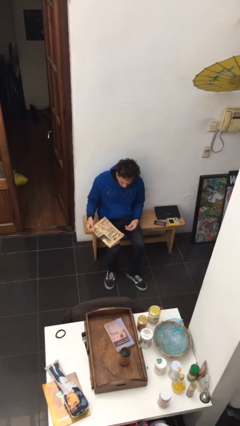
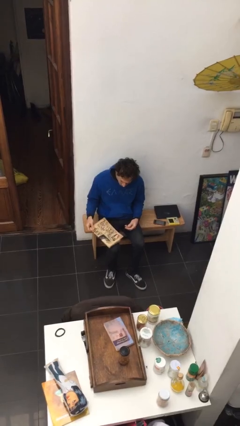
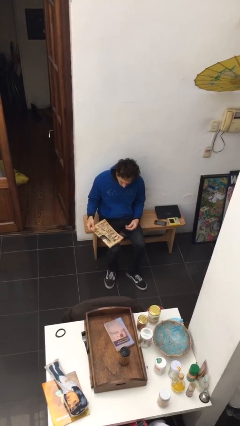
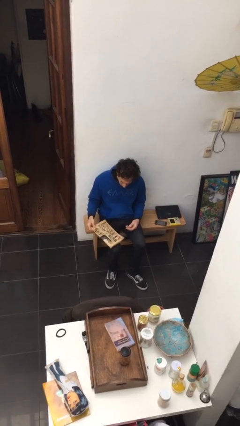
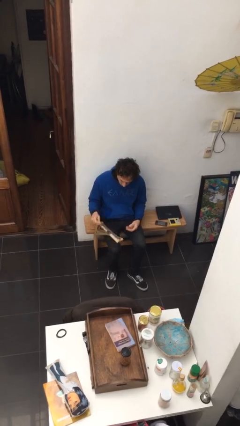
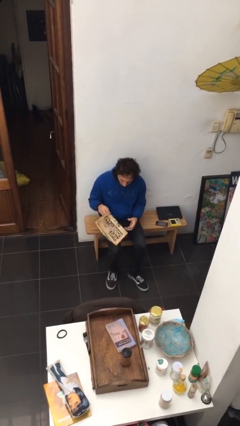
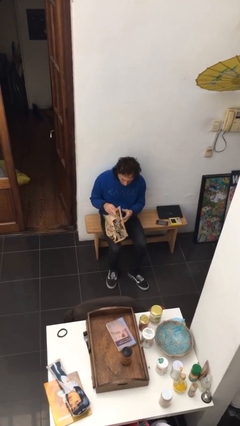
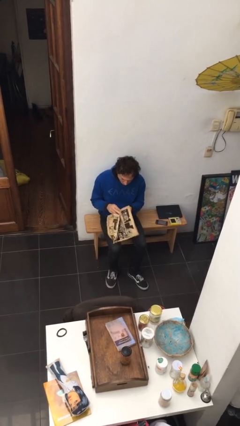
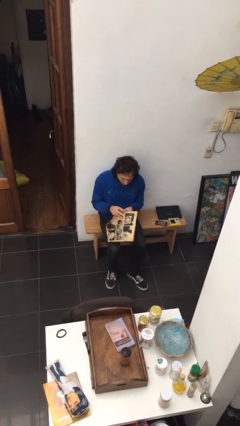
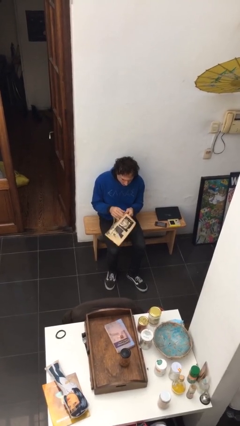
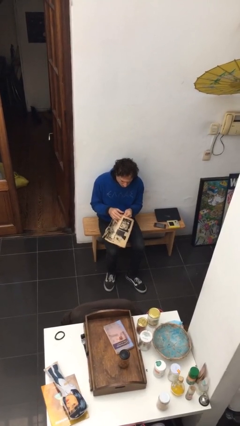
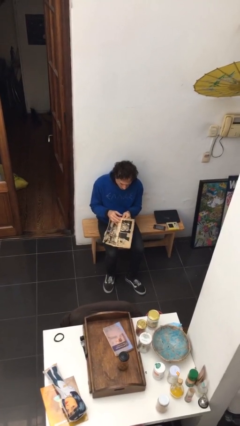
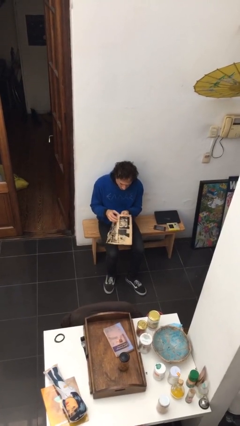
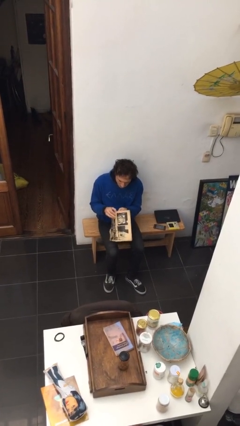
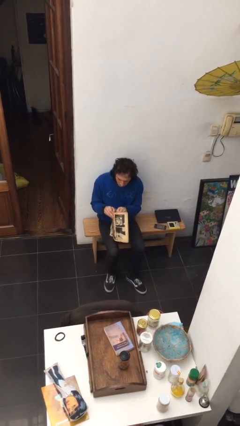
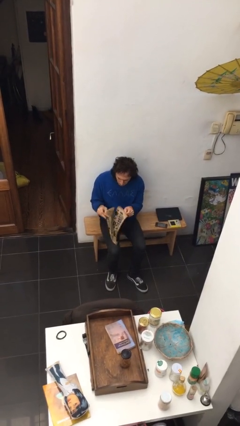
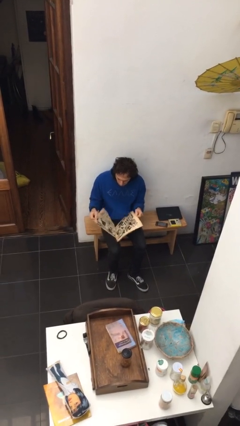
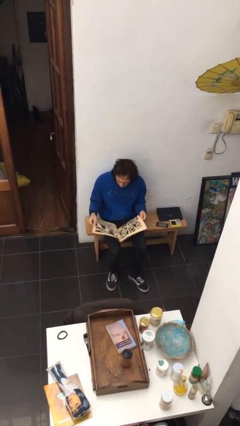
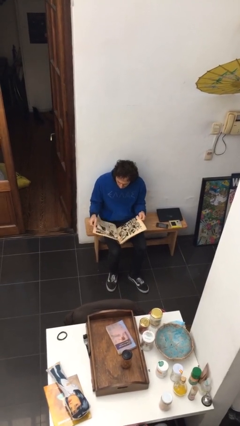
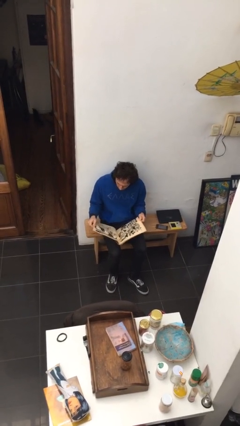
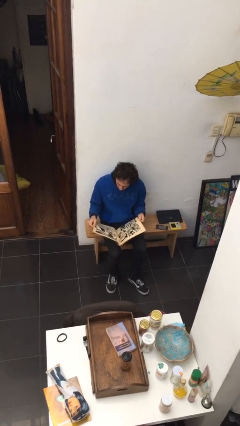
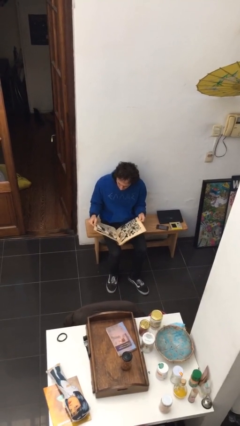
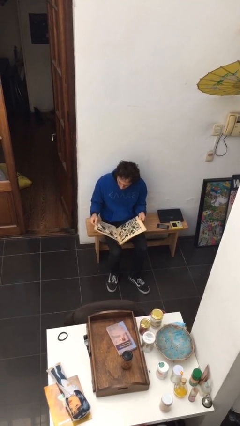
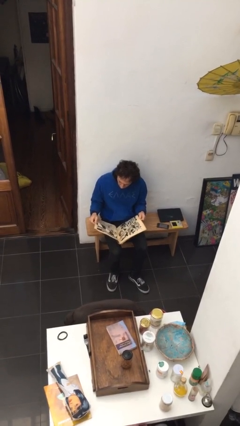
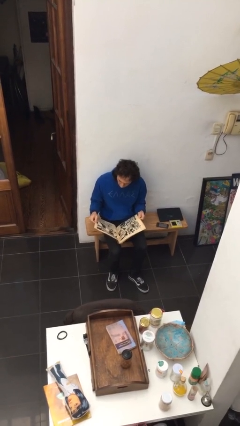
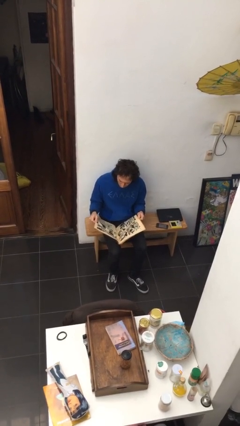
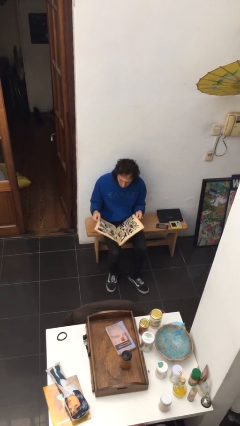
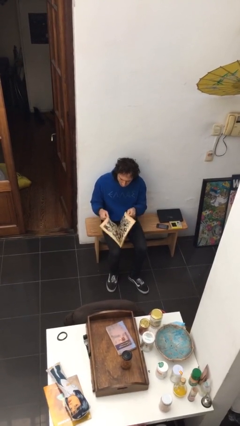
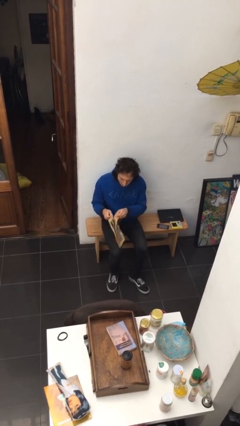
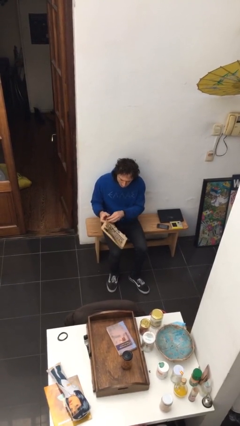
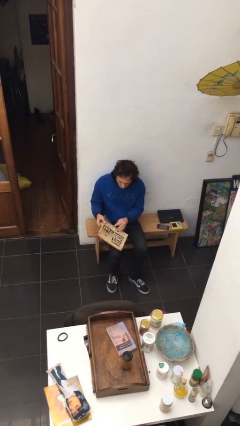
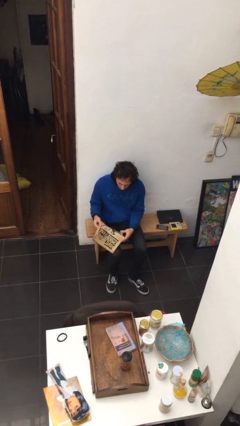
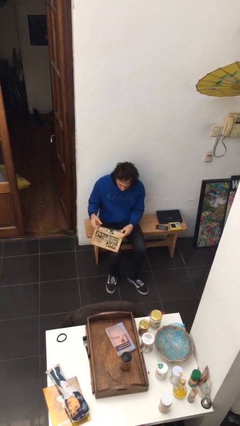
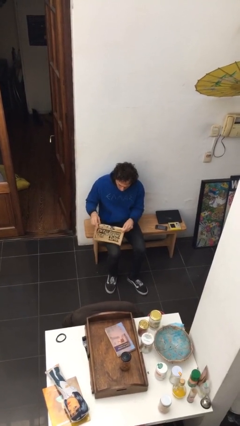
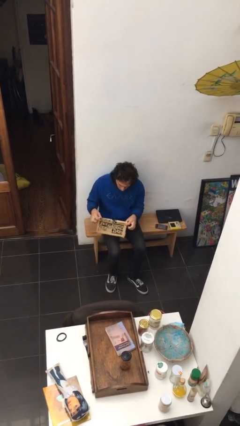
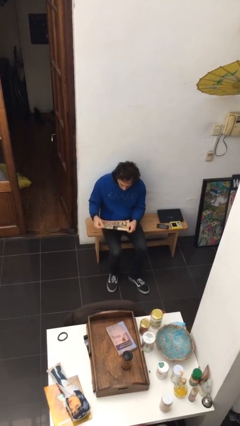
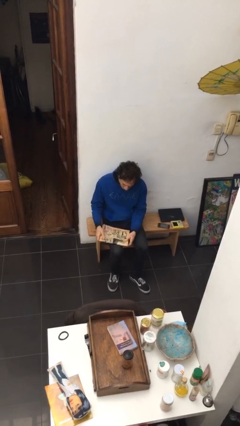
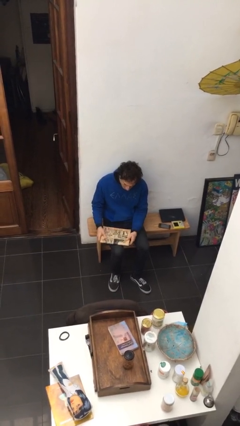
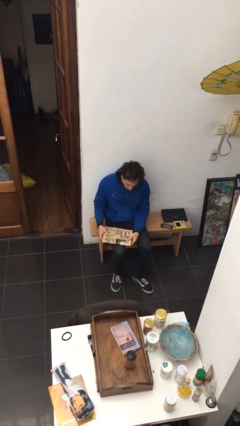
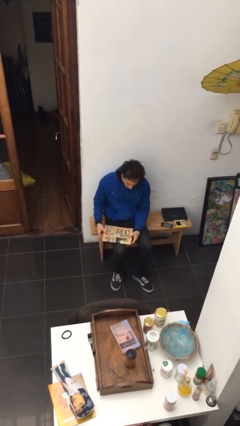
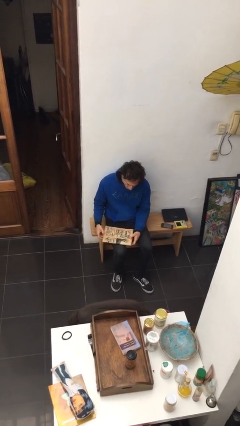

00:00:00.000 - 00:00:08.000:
person reads newspaper

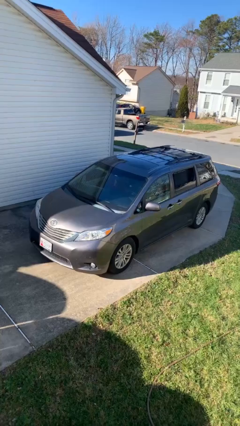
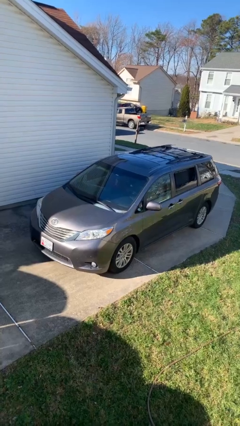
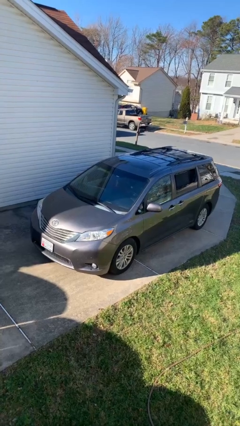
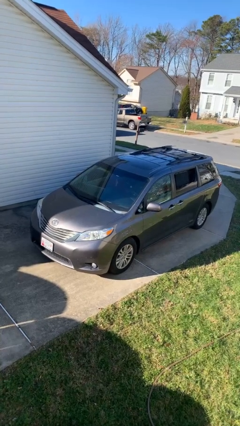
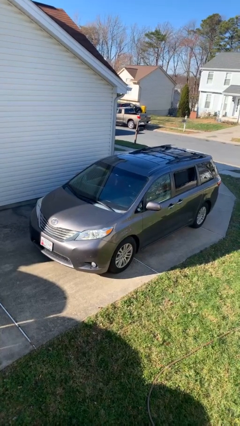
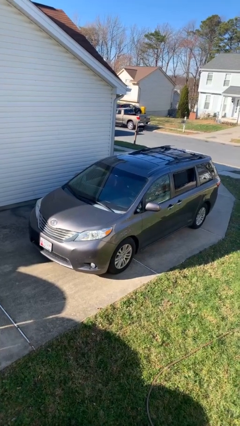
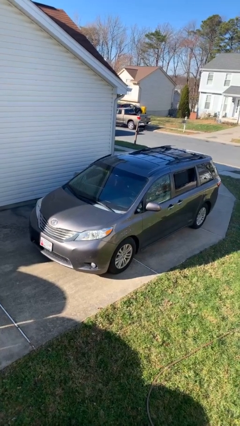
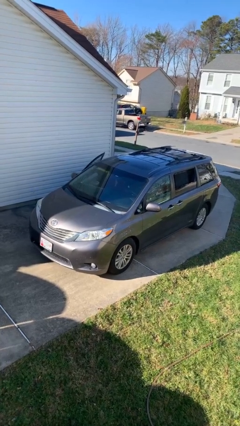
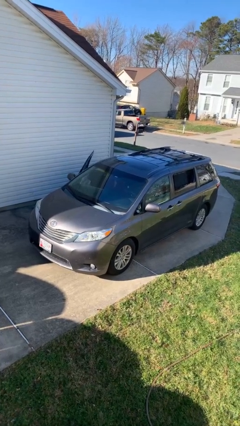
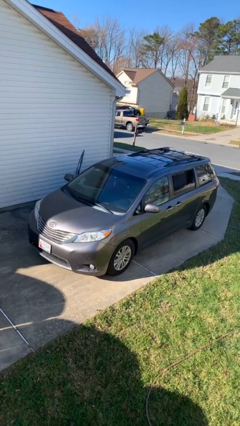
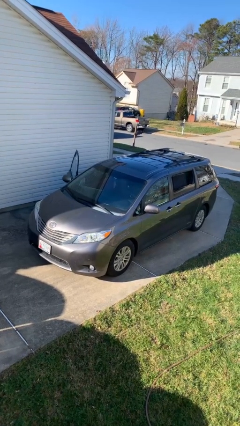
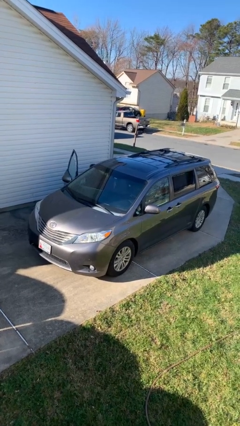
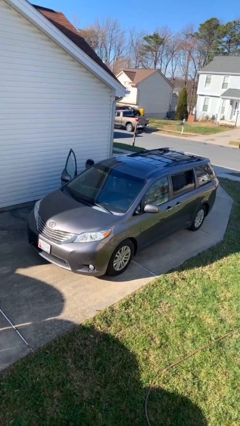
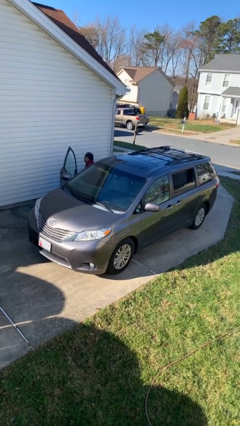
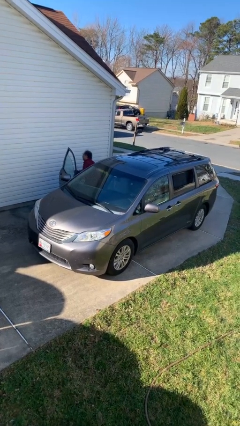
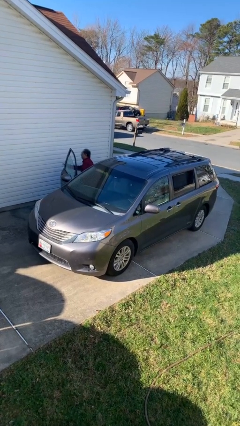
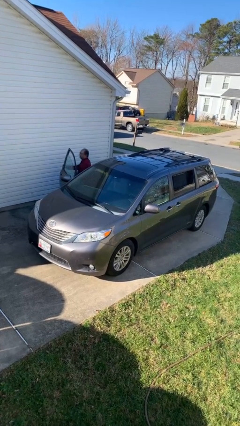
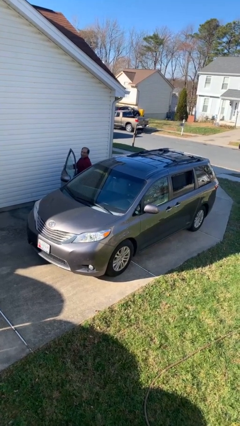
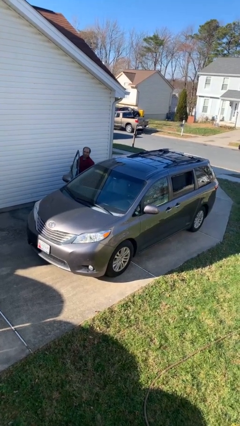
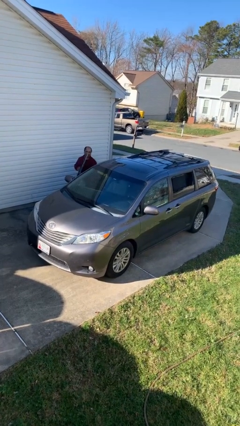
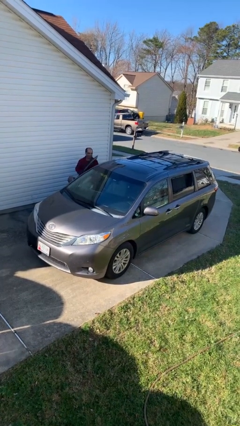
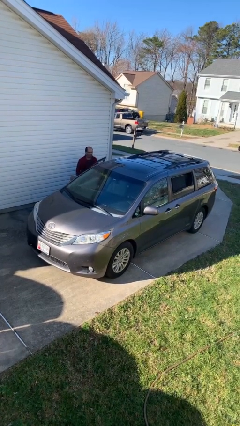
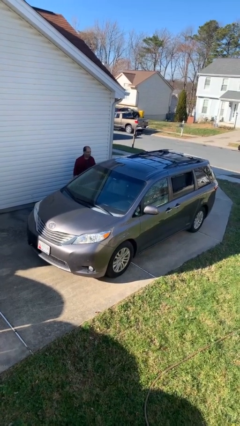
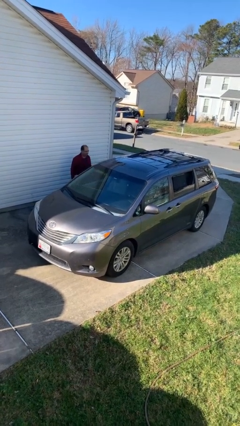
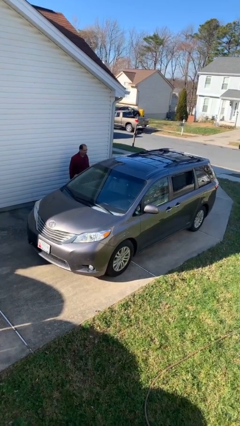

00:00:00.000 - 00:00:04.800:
car drops off person

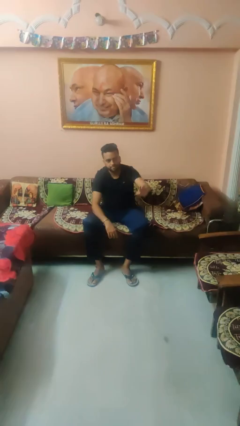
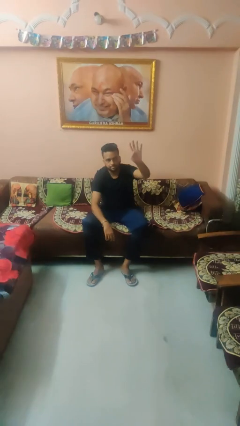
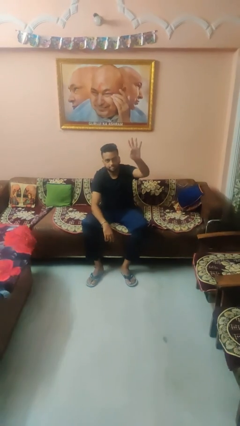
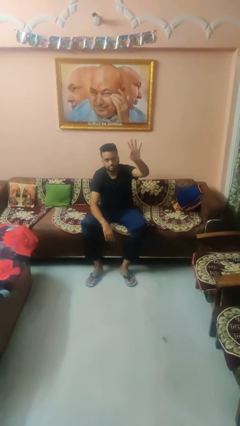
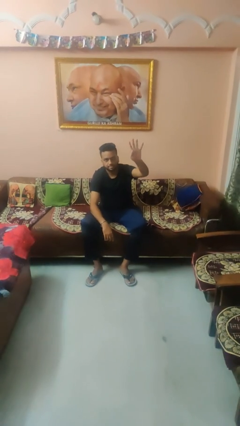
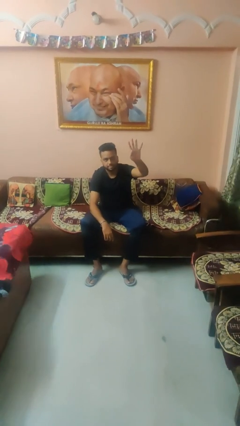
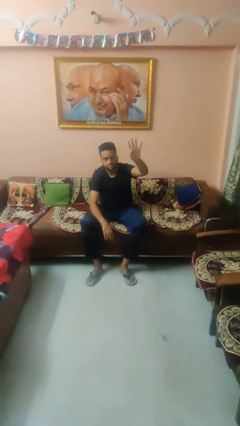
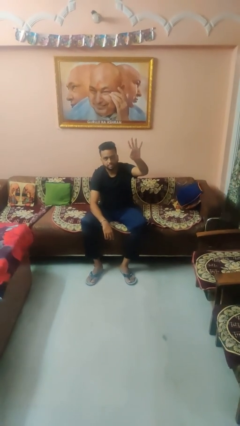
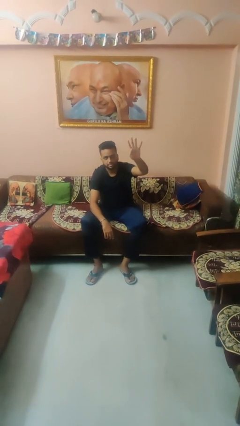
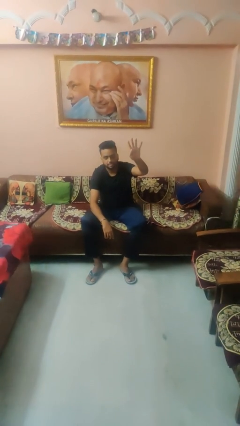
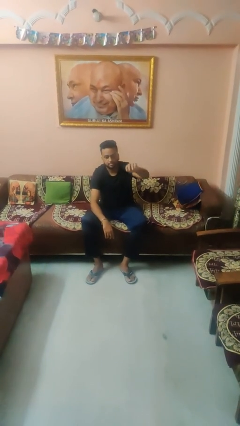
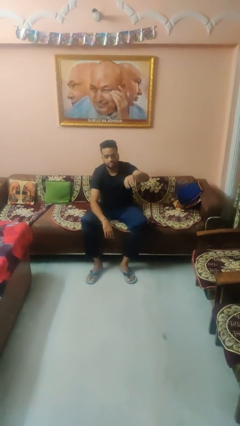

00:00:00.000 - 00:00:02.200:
person gestures number four

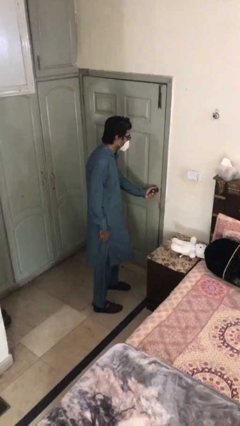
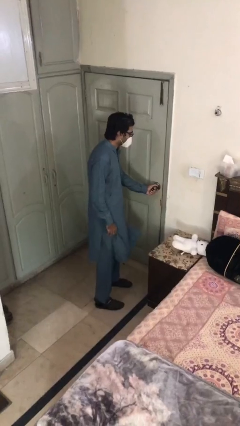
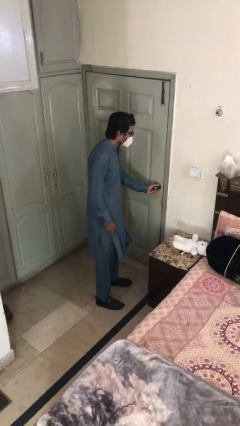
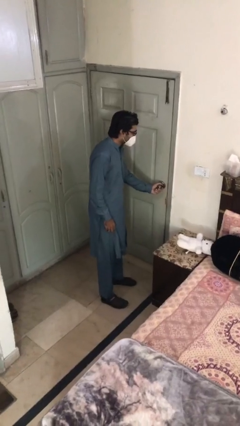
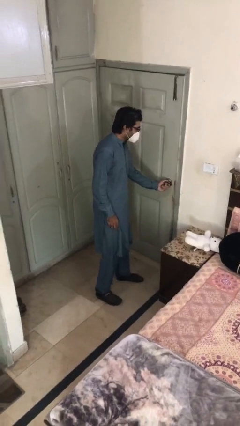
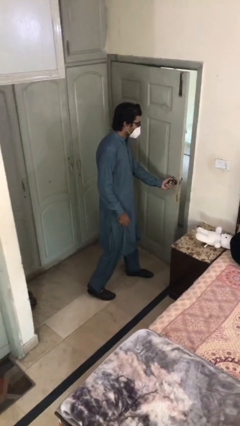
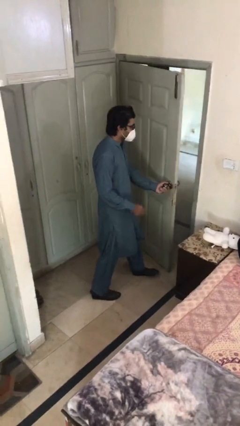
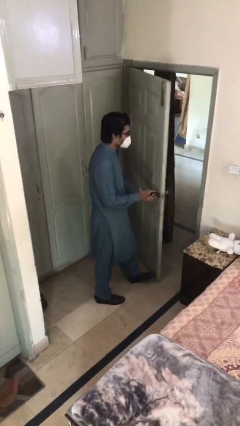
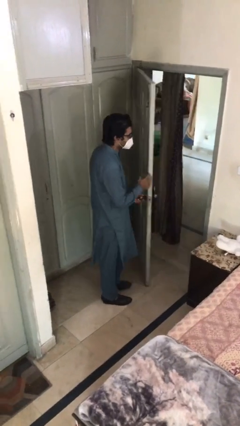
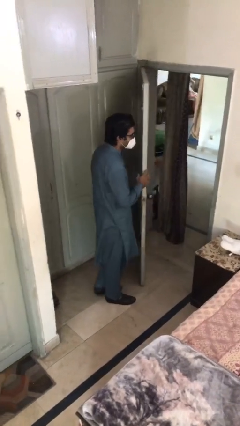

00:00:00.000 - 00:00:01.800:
person opens facility door

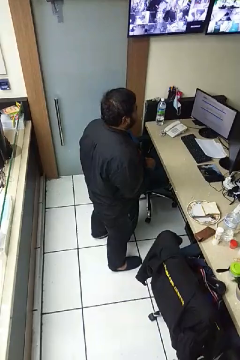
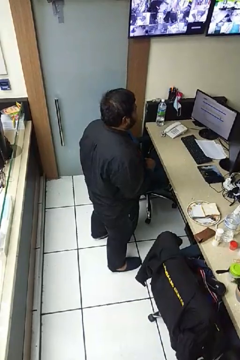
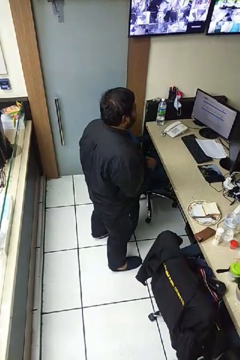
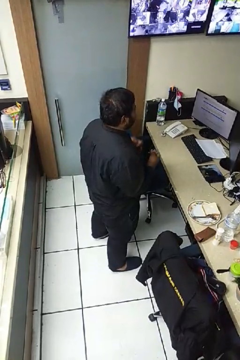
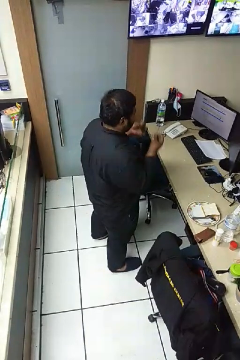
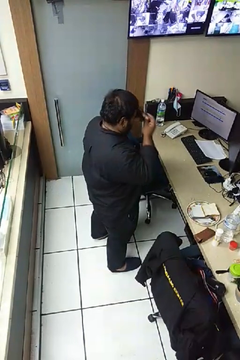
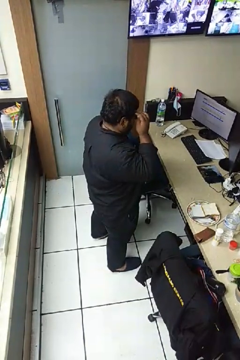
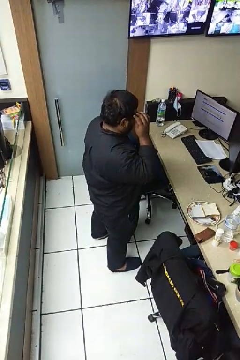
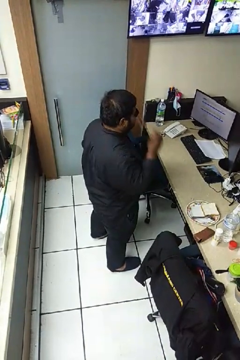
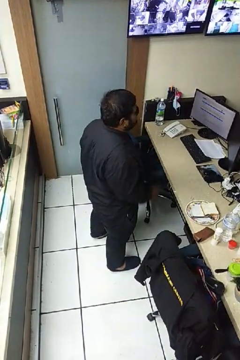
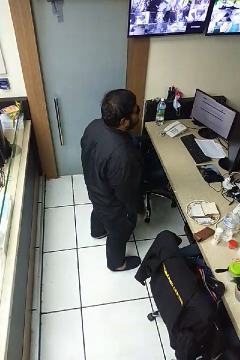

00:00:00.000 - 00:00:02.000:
person puts on sunglasses
